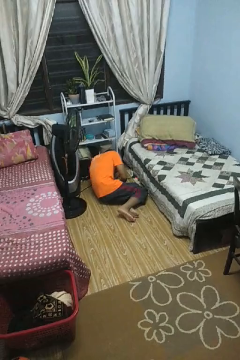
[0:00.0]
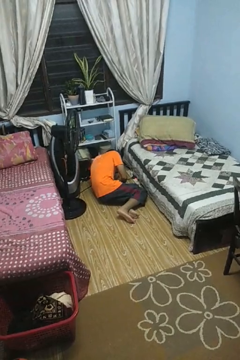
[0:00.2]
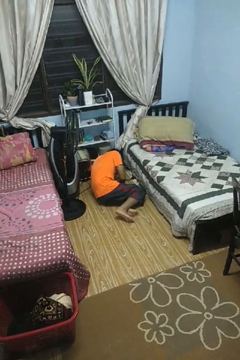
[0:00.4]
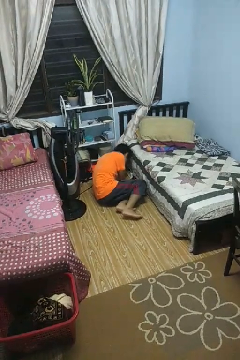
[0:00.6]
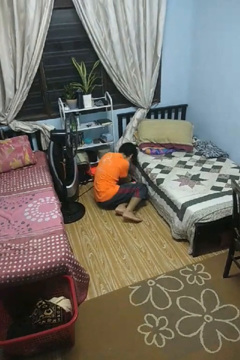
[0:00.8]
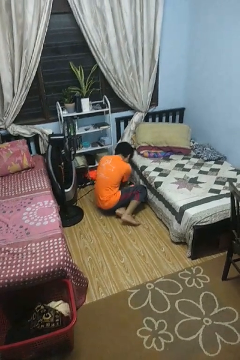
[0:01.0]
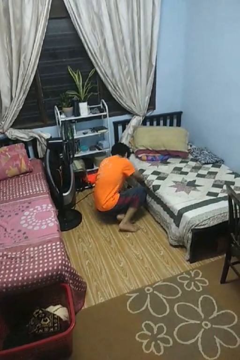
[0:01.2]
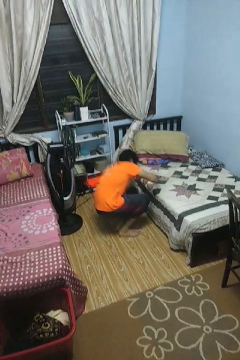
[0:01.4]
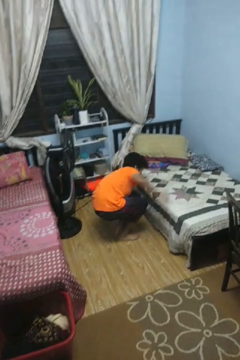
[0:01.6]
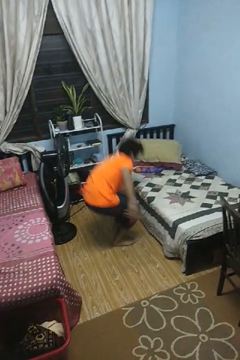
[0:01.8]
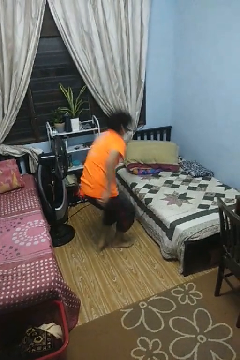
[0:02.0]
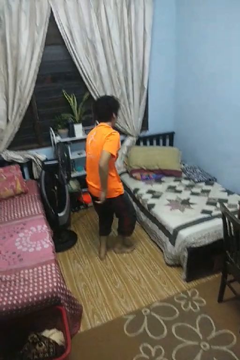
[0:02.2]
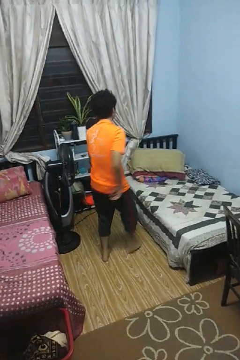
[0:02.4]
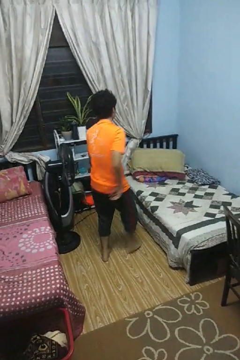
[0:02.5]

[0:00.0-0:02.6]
person stands up from floor

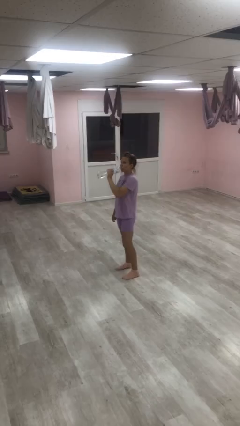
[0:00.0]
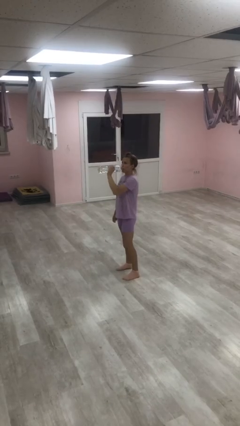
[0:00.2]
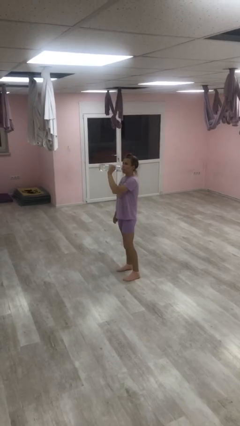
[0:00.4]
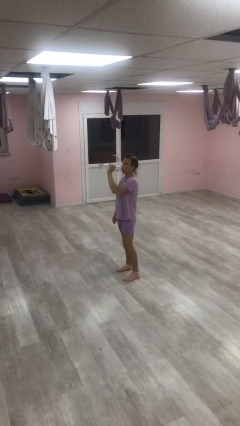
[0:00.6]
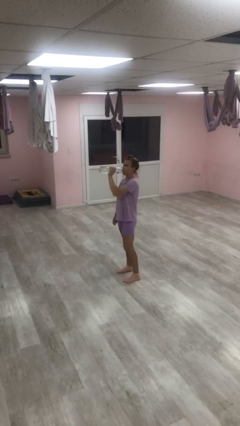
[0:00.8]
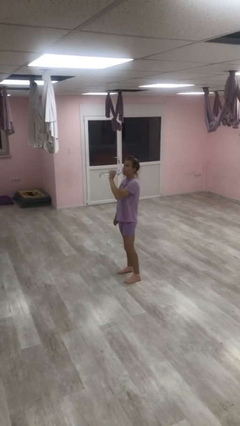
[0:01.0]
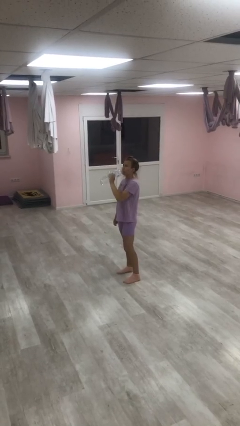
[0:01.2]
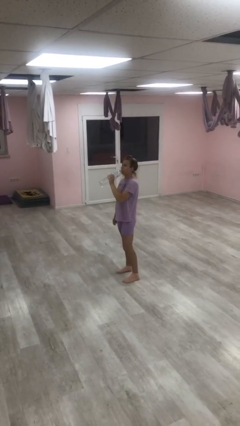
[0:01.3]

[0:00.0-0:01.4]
person drinks from bottle

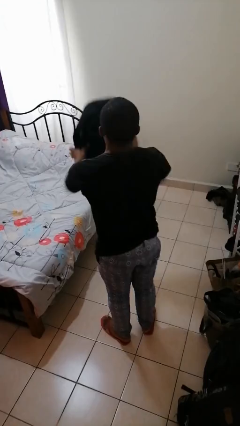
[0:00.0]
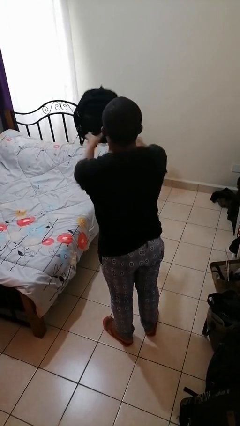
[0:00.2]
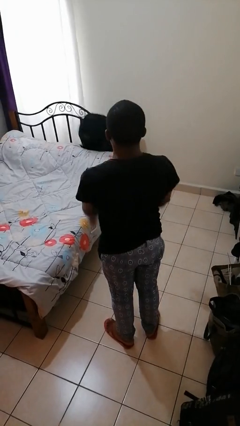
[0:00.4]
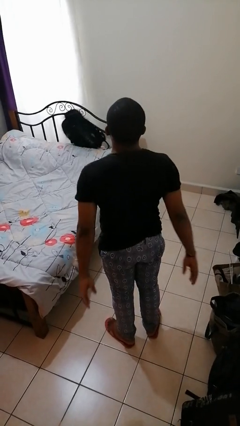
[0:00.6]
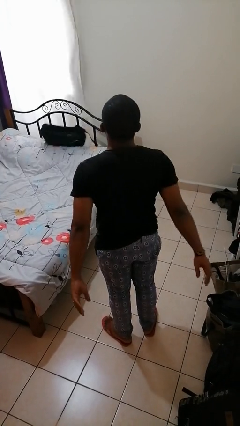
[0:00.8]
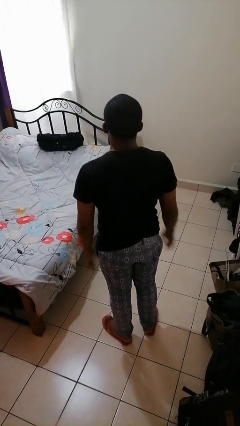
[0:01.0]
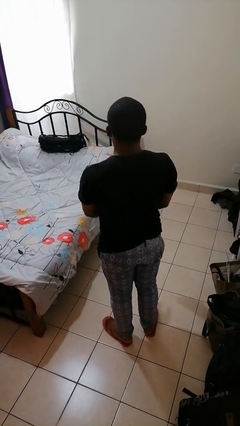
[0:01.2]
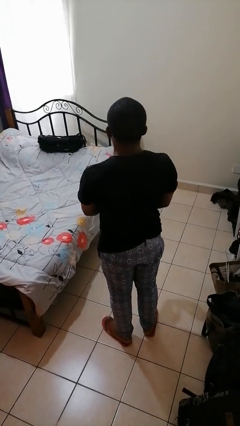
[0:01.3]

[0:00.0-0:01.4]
person throws object on bed

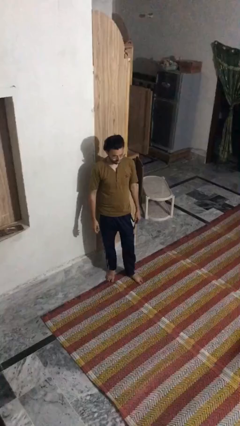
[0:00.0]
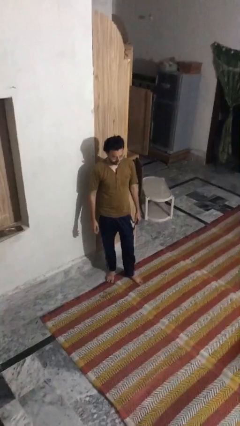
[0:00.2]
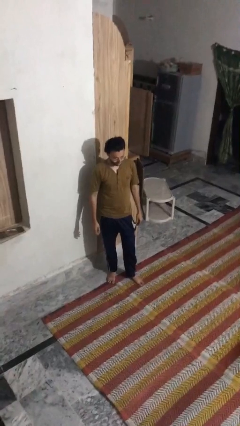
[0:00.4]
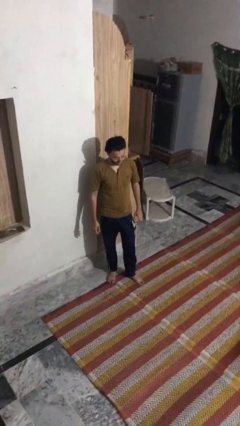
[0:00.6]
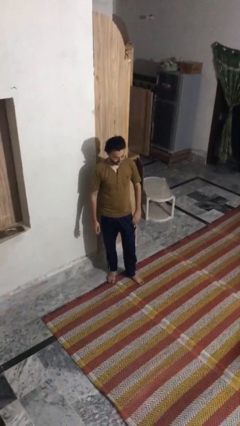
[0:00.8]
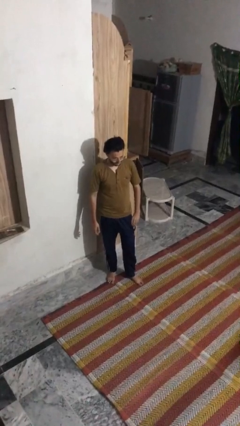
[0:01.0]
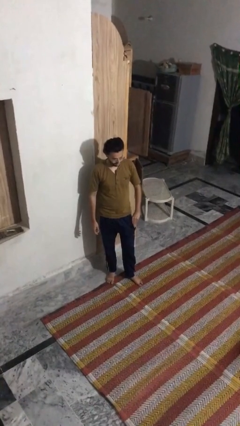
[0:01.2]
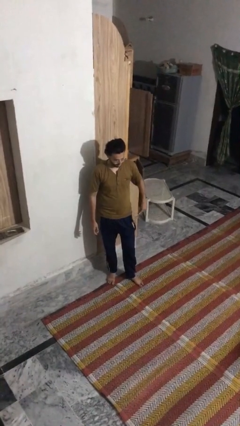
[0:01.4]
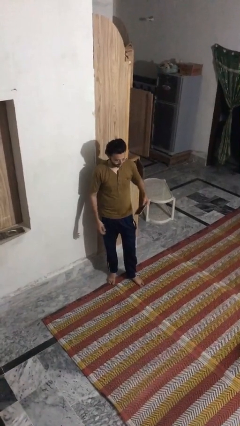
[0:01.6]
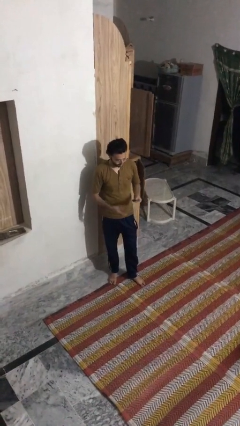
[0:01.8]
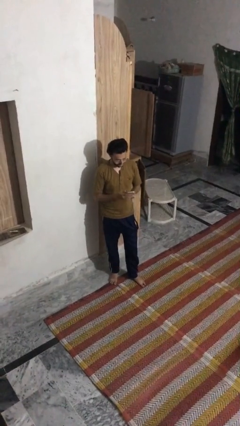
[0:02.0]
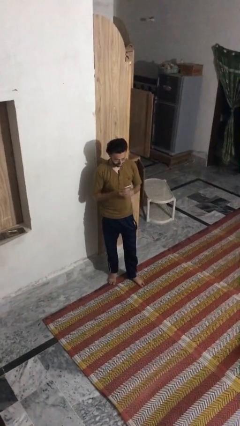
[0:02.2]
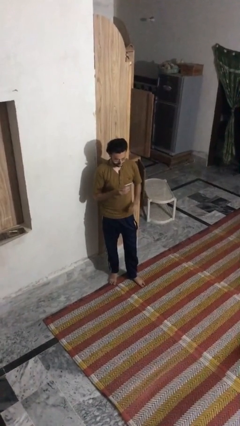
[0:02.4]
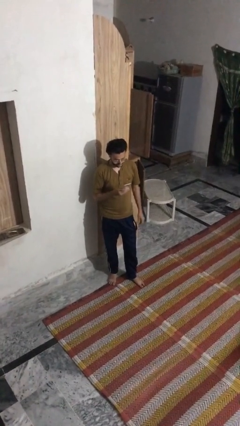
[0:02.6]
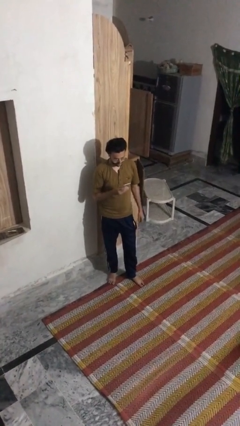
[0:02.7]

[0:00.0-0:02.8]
person takes phone from pocket

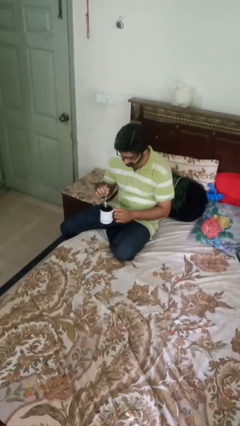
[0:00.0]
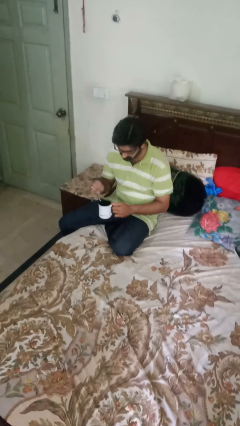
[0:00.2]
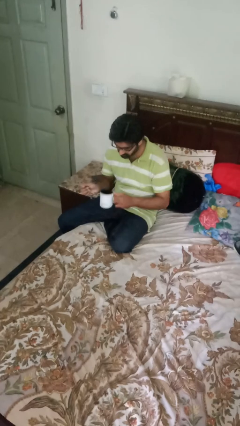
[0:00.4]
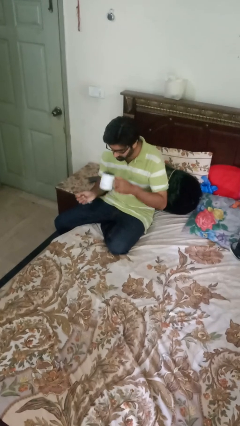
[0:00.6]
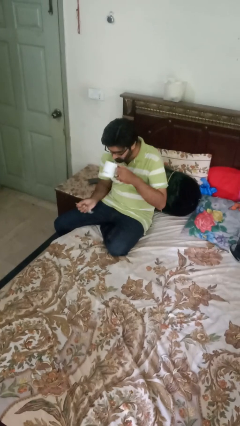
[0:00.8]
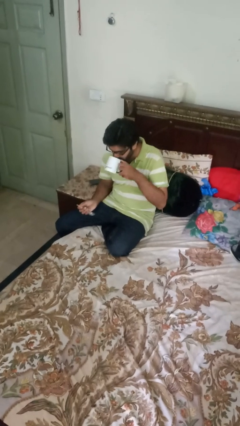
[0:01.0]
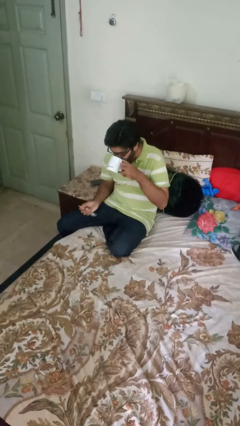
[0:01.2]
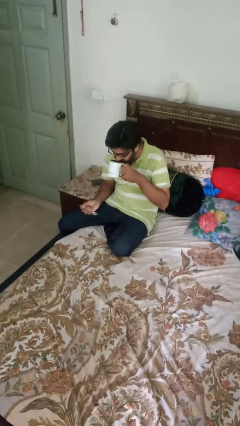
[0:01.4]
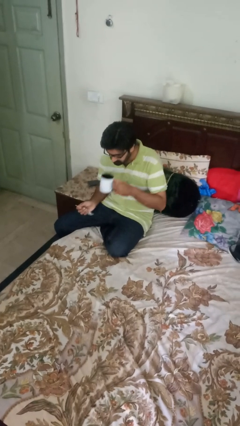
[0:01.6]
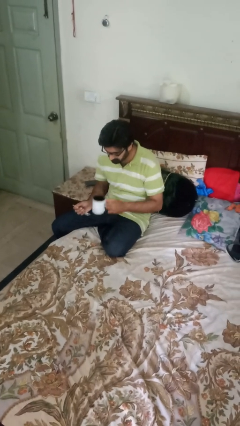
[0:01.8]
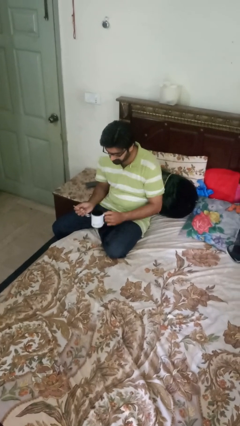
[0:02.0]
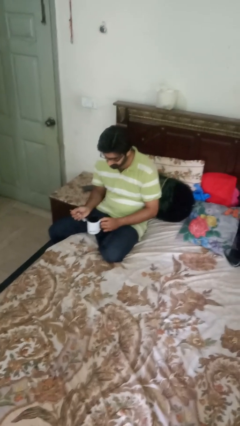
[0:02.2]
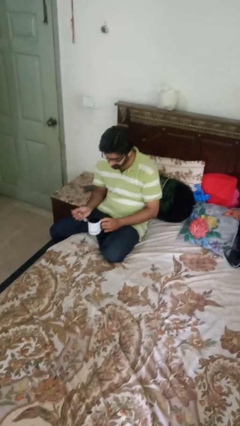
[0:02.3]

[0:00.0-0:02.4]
person drinks from mug

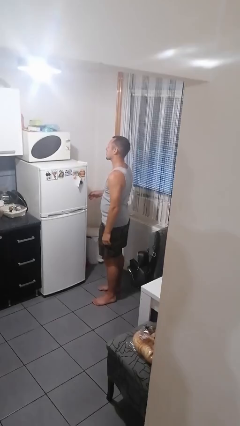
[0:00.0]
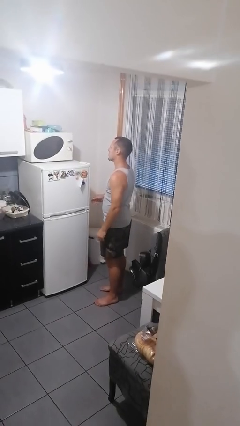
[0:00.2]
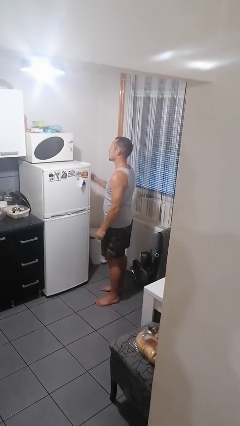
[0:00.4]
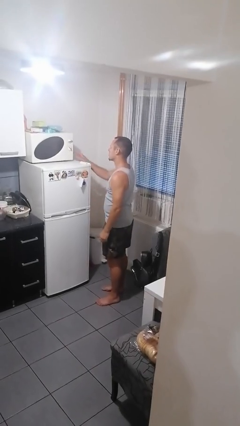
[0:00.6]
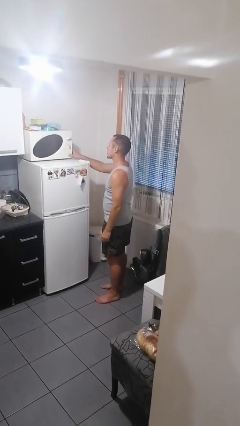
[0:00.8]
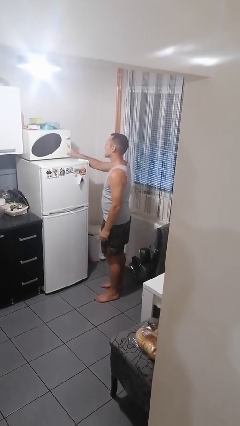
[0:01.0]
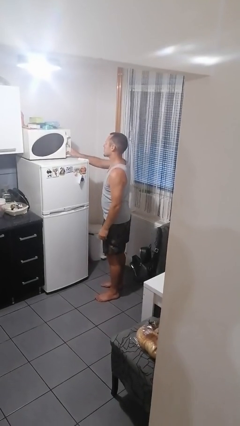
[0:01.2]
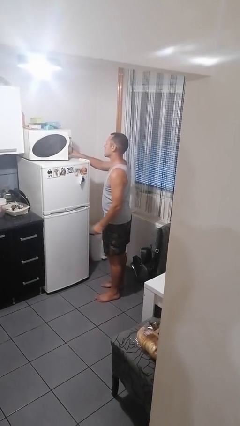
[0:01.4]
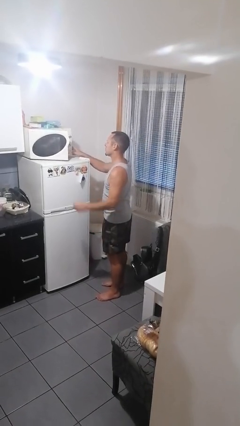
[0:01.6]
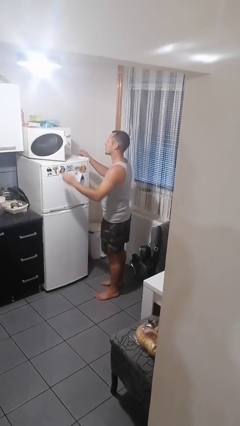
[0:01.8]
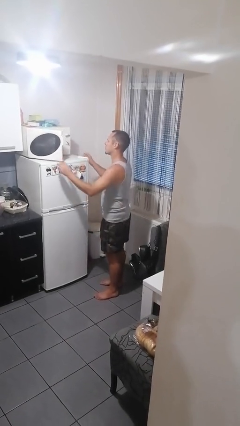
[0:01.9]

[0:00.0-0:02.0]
person opens microwave

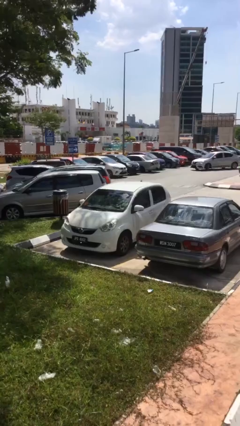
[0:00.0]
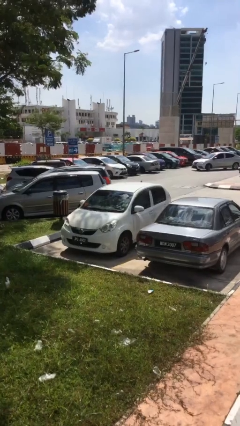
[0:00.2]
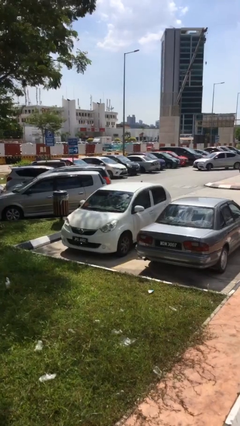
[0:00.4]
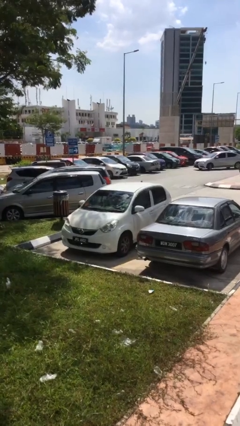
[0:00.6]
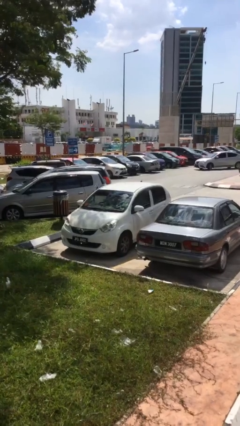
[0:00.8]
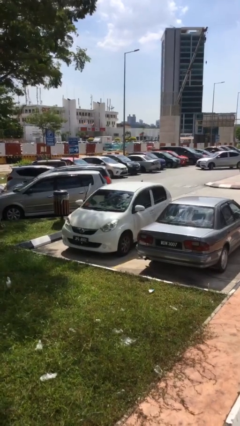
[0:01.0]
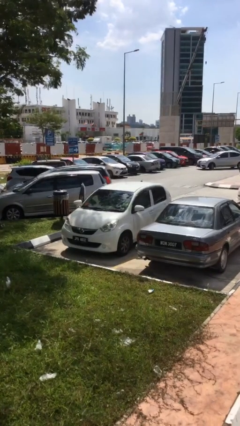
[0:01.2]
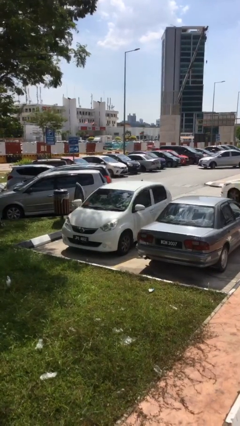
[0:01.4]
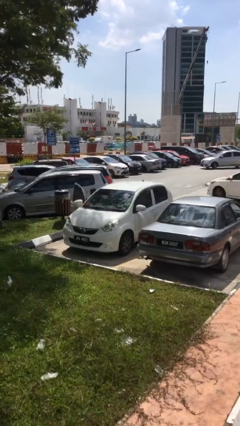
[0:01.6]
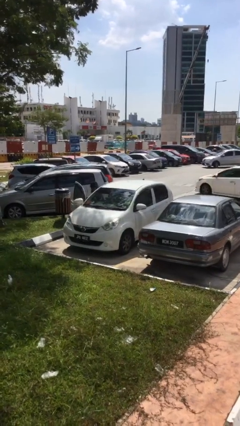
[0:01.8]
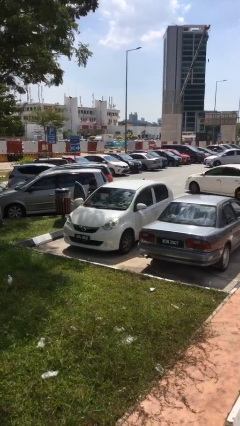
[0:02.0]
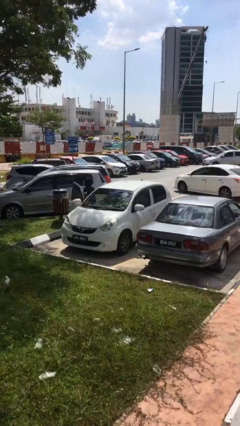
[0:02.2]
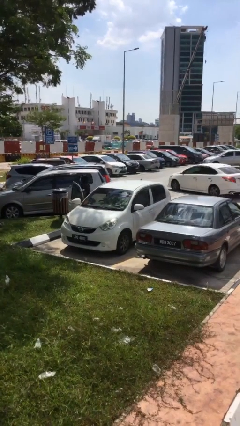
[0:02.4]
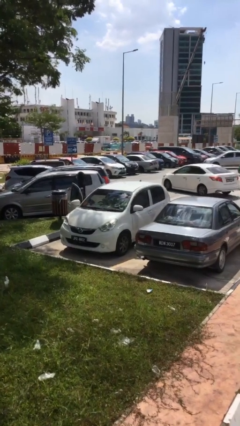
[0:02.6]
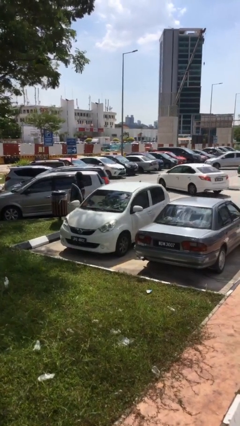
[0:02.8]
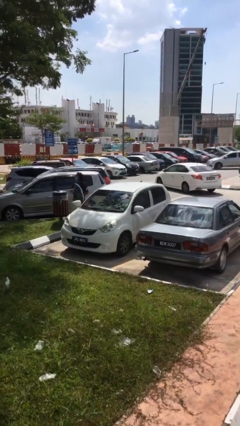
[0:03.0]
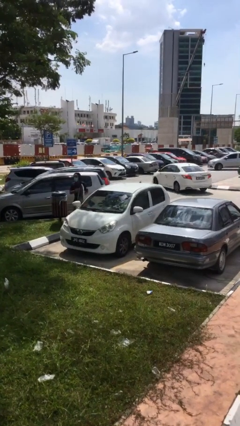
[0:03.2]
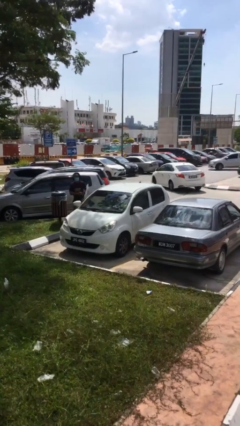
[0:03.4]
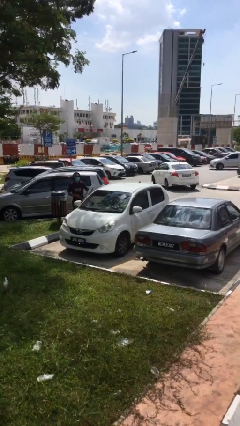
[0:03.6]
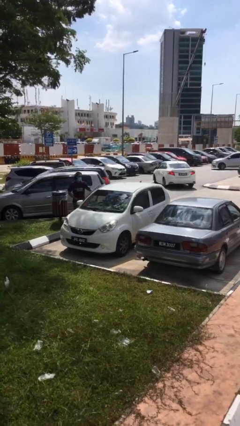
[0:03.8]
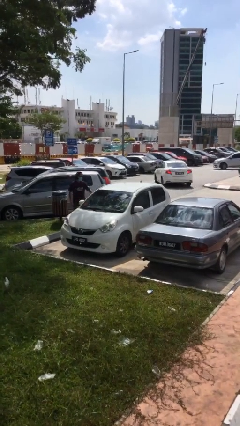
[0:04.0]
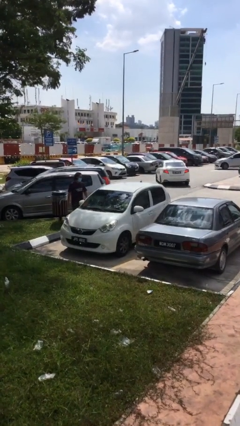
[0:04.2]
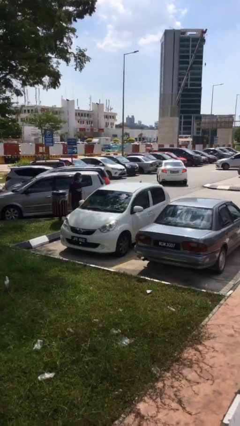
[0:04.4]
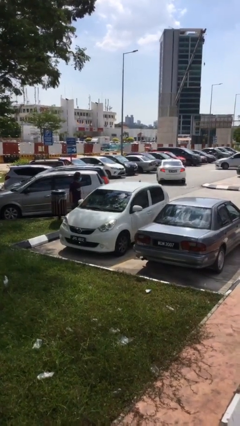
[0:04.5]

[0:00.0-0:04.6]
car drops off person

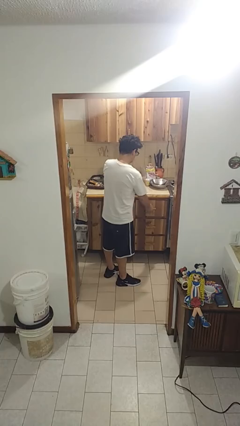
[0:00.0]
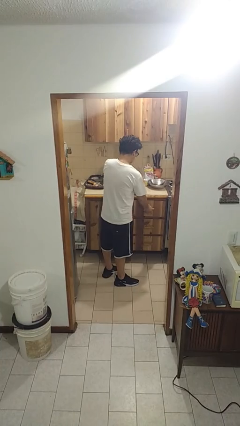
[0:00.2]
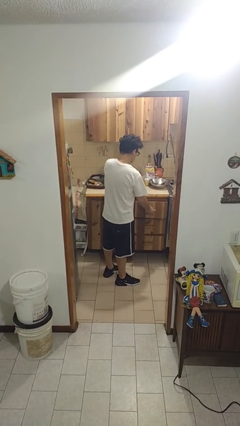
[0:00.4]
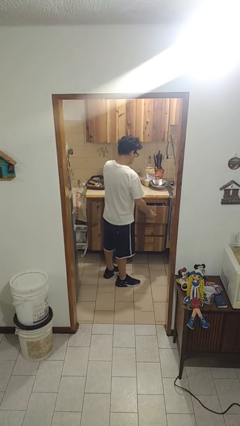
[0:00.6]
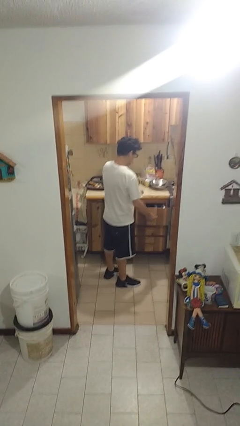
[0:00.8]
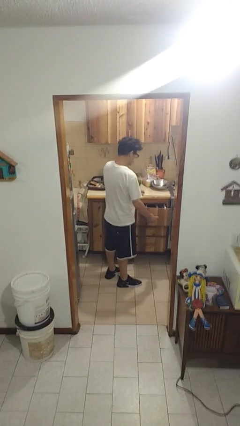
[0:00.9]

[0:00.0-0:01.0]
person opens kitchen drawer
